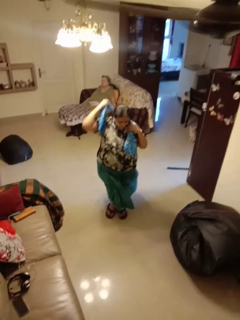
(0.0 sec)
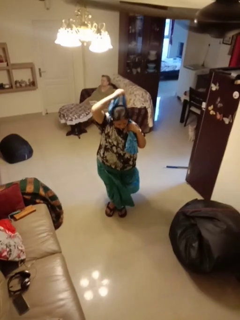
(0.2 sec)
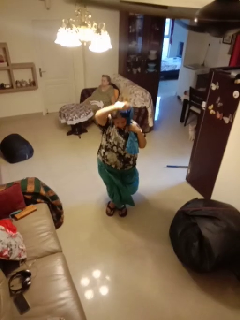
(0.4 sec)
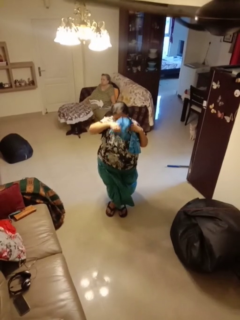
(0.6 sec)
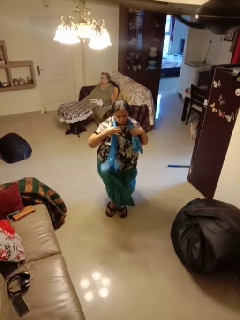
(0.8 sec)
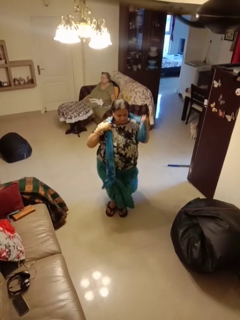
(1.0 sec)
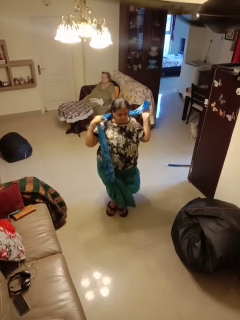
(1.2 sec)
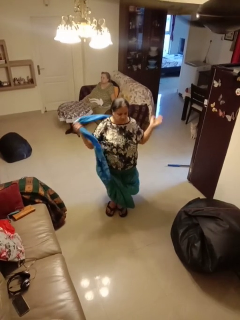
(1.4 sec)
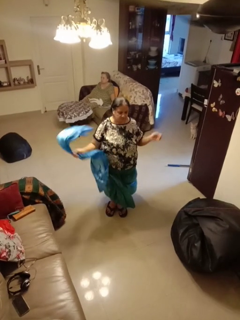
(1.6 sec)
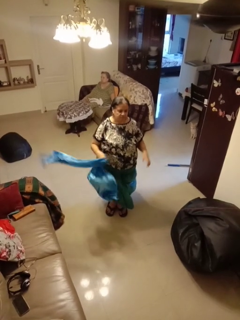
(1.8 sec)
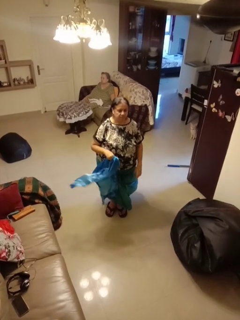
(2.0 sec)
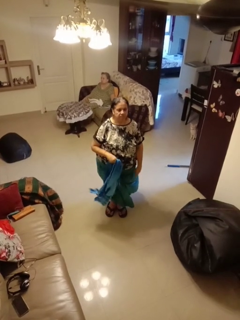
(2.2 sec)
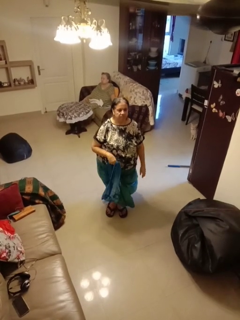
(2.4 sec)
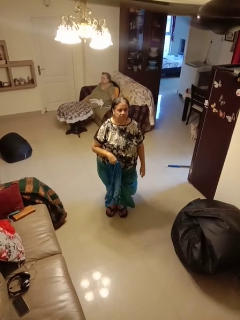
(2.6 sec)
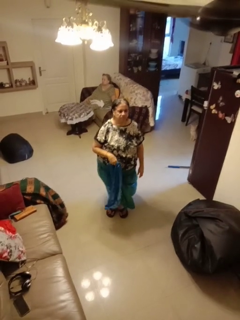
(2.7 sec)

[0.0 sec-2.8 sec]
person takes off scarf

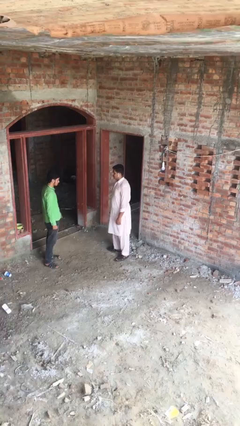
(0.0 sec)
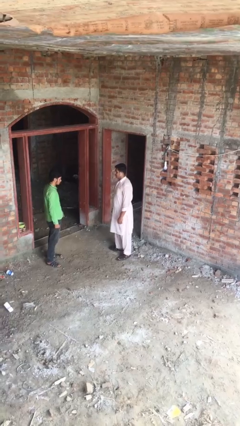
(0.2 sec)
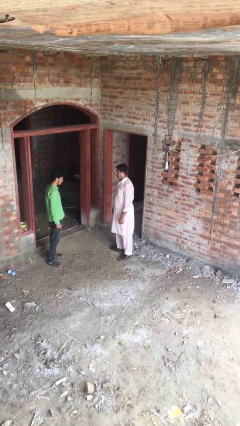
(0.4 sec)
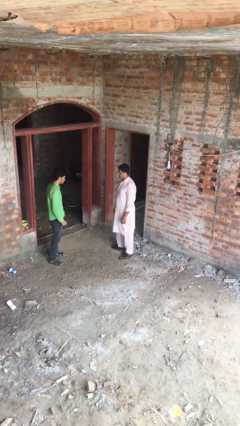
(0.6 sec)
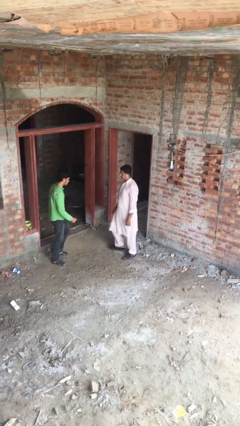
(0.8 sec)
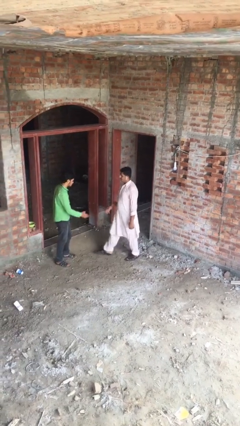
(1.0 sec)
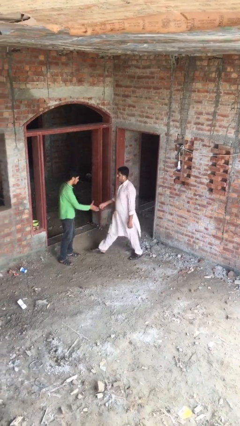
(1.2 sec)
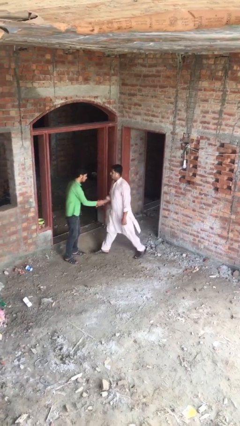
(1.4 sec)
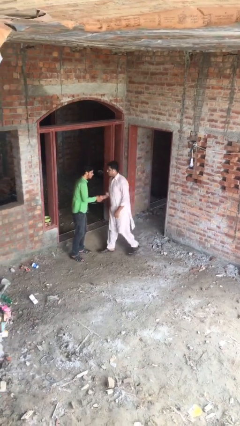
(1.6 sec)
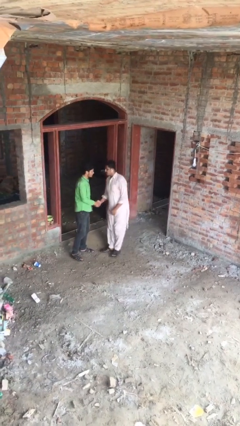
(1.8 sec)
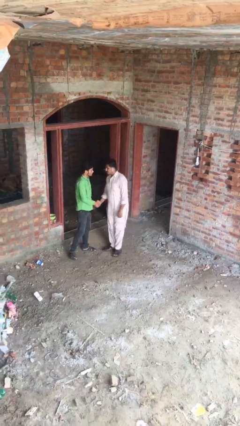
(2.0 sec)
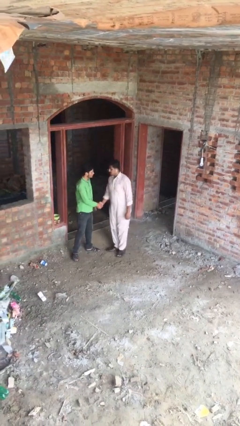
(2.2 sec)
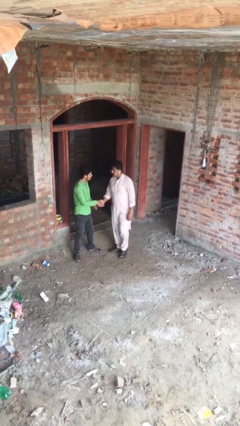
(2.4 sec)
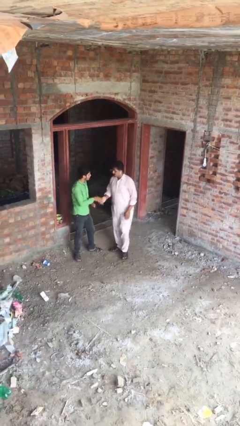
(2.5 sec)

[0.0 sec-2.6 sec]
person shakes hand

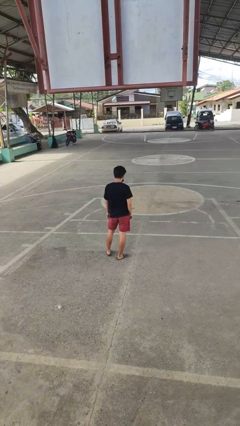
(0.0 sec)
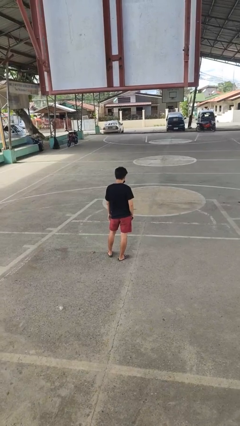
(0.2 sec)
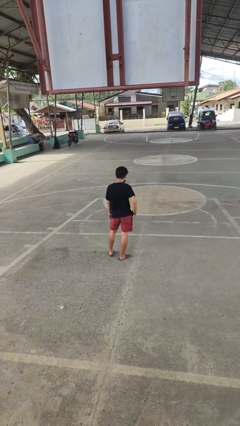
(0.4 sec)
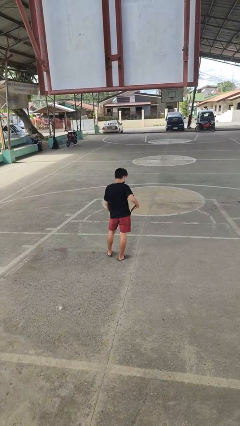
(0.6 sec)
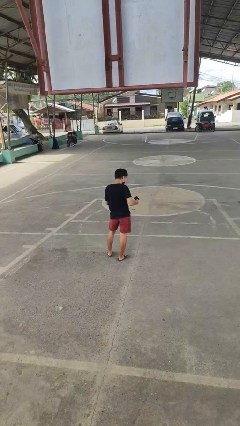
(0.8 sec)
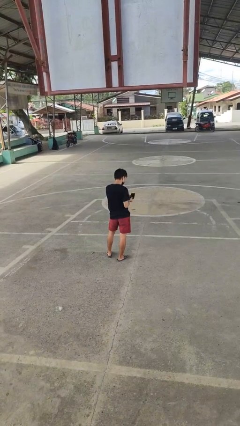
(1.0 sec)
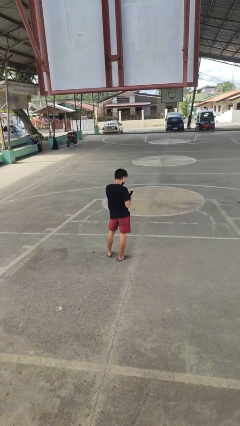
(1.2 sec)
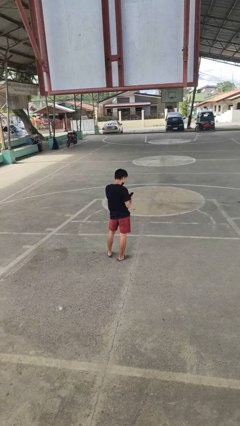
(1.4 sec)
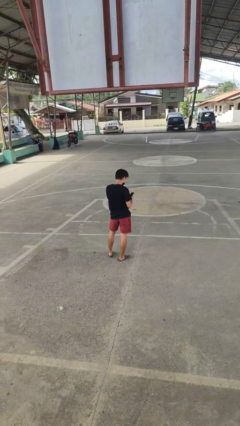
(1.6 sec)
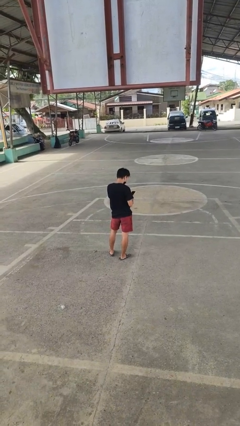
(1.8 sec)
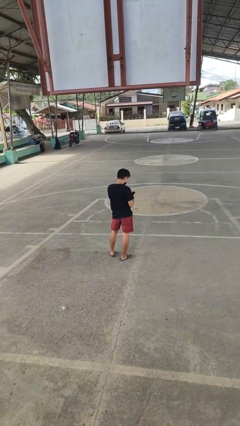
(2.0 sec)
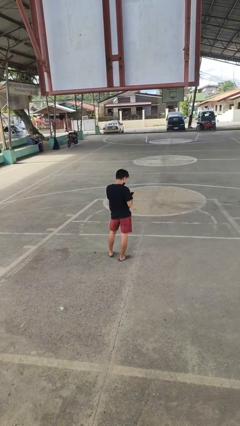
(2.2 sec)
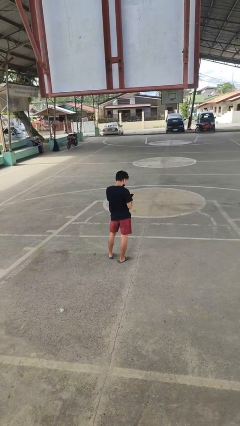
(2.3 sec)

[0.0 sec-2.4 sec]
person takes phone from pocket

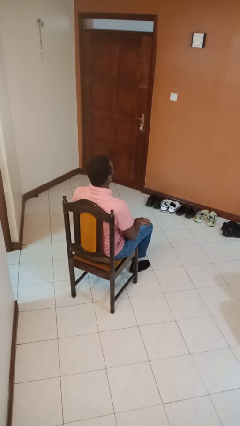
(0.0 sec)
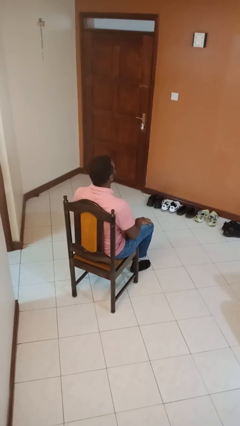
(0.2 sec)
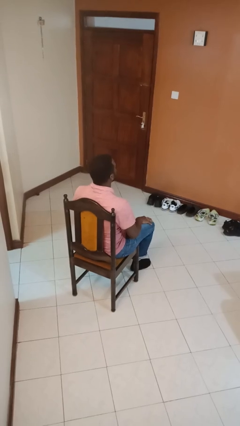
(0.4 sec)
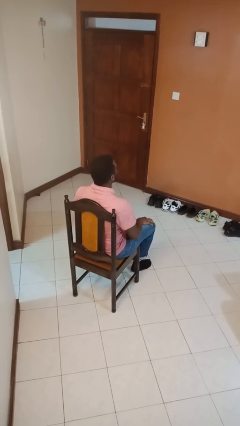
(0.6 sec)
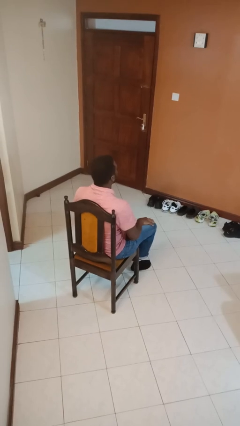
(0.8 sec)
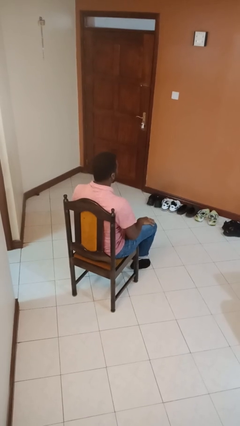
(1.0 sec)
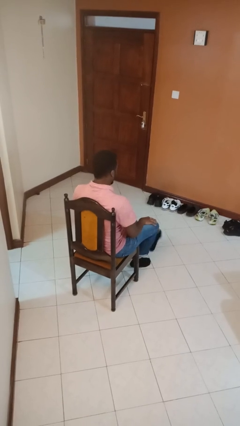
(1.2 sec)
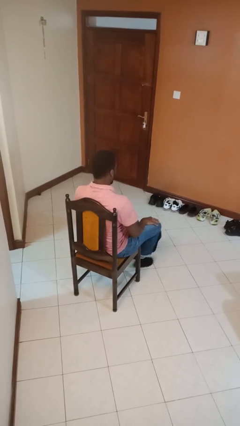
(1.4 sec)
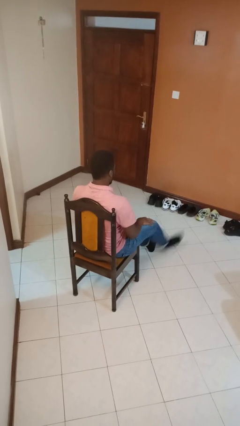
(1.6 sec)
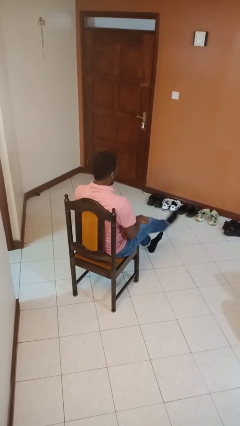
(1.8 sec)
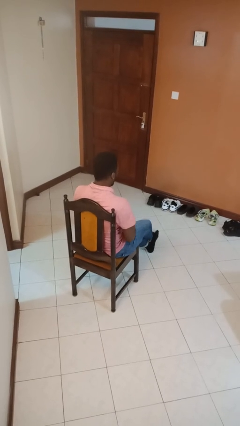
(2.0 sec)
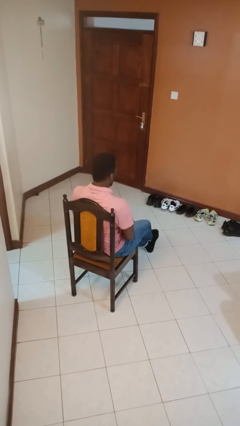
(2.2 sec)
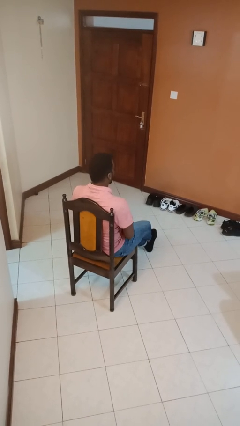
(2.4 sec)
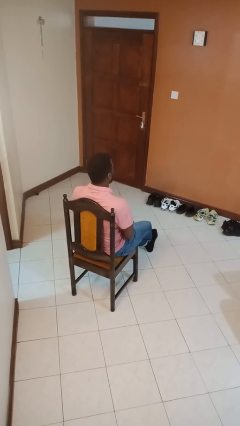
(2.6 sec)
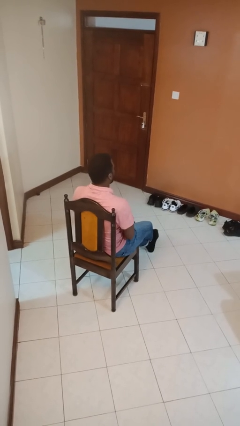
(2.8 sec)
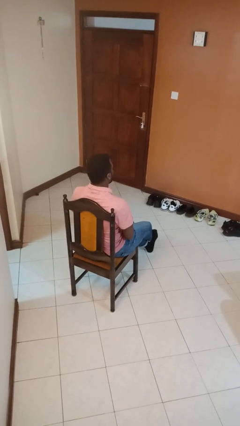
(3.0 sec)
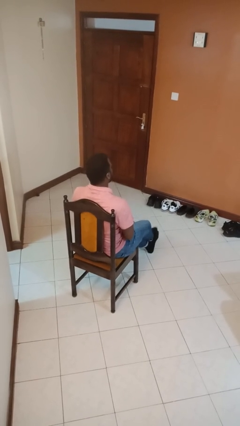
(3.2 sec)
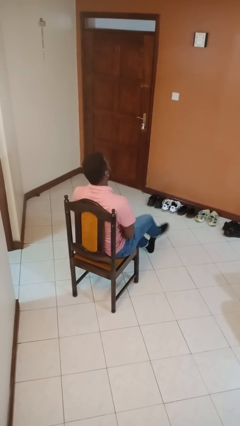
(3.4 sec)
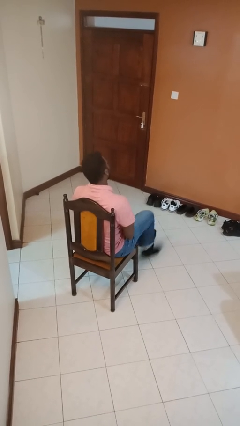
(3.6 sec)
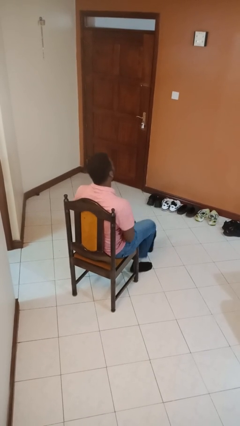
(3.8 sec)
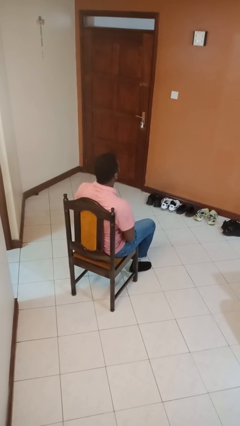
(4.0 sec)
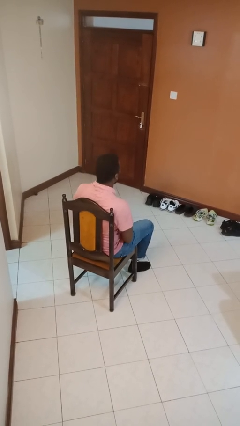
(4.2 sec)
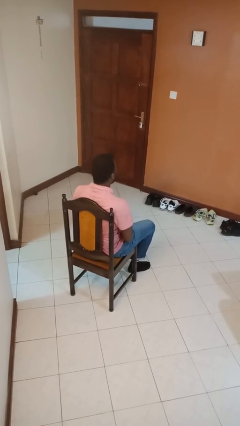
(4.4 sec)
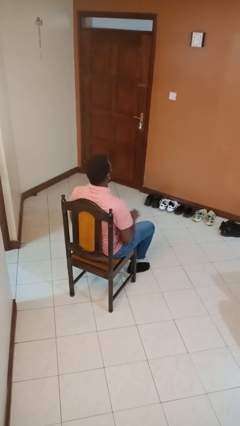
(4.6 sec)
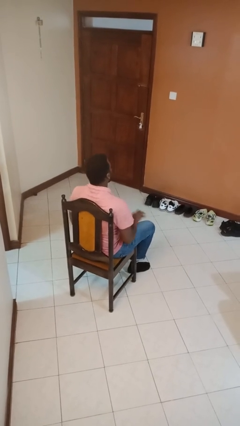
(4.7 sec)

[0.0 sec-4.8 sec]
person crosses legs

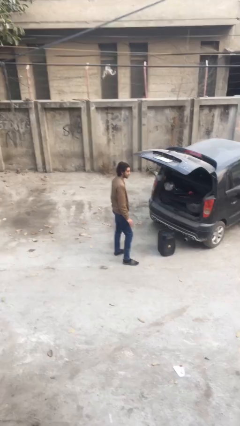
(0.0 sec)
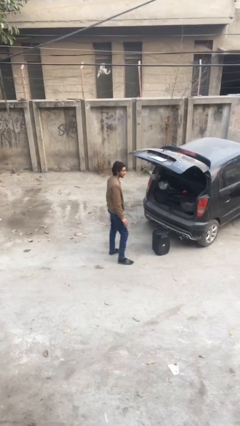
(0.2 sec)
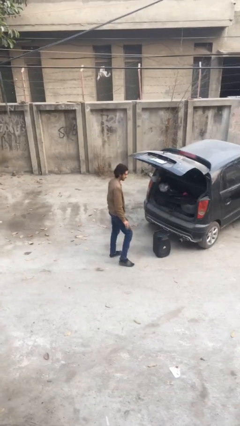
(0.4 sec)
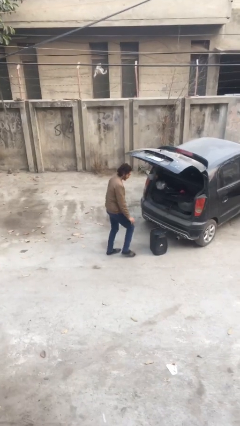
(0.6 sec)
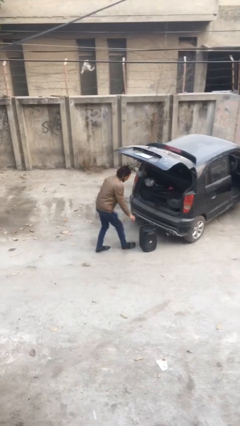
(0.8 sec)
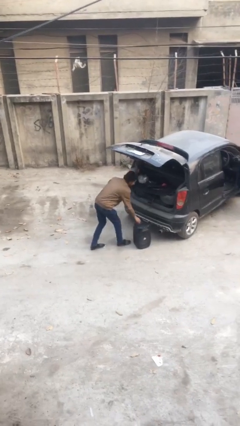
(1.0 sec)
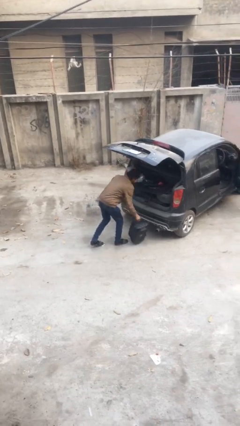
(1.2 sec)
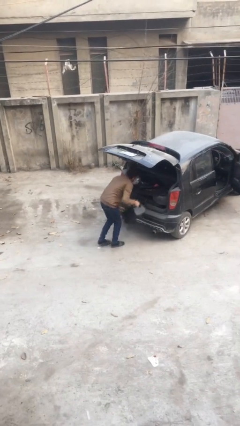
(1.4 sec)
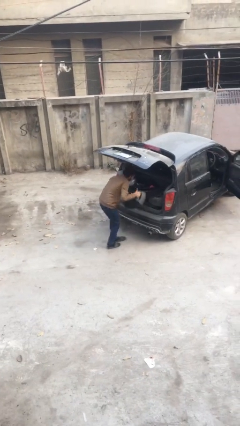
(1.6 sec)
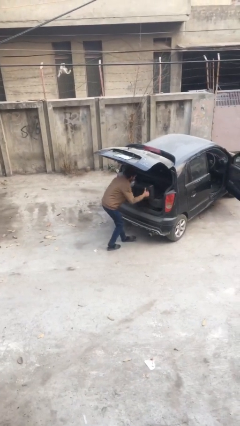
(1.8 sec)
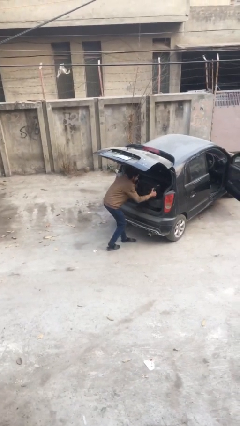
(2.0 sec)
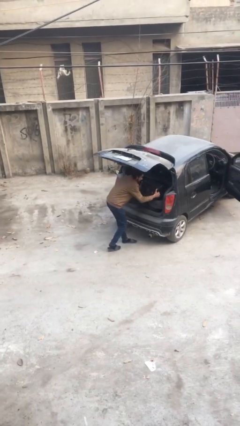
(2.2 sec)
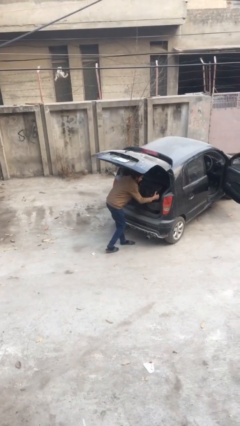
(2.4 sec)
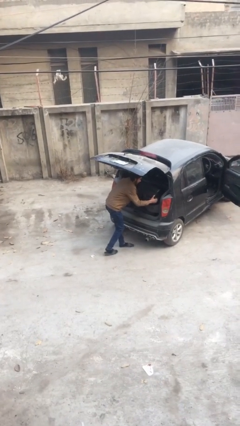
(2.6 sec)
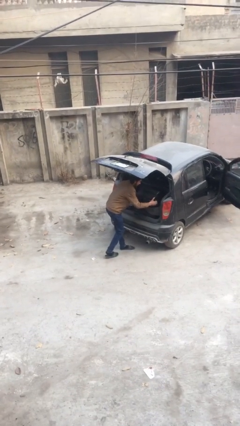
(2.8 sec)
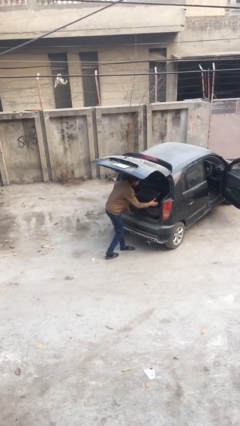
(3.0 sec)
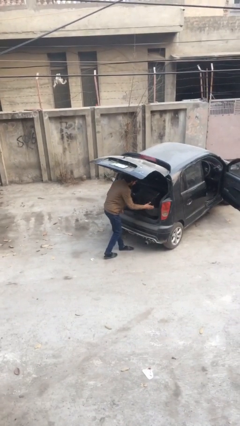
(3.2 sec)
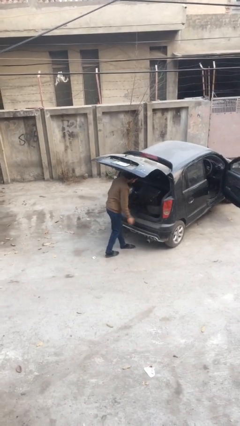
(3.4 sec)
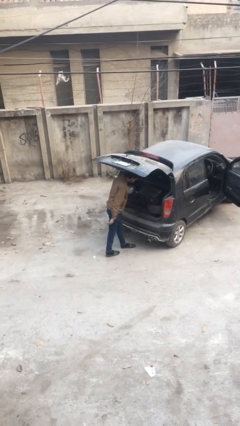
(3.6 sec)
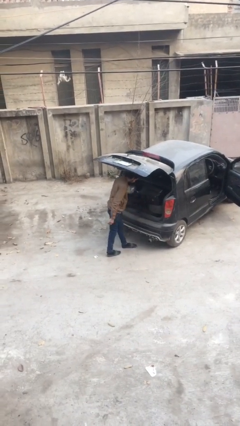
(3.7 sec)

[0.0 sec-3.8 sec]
person loads car

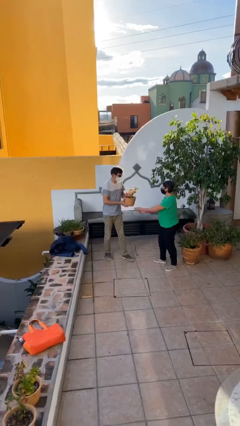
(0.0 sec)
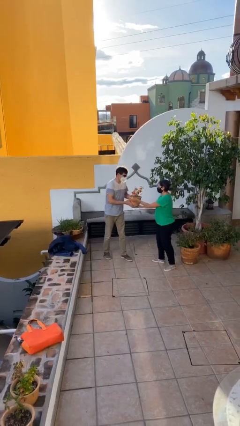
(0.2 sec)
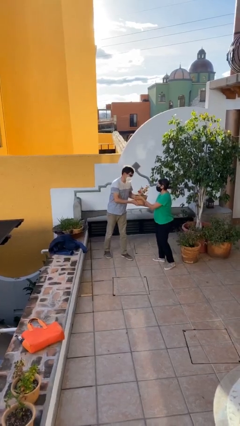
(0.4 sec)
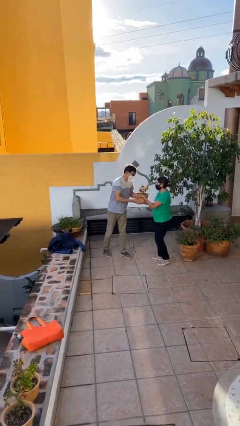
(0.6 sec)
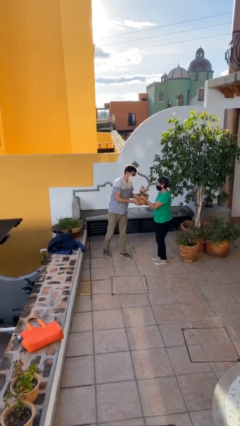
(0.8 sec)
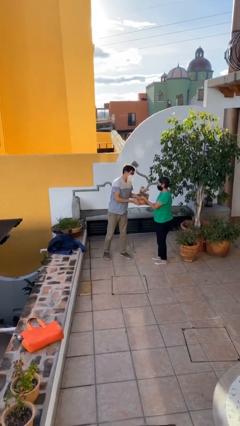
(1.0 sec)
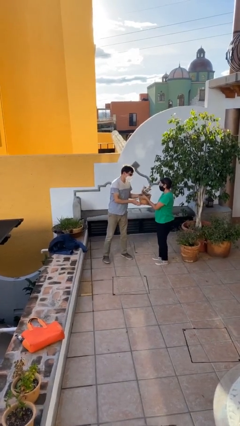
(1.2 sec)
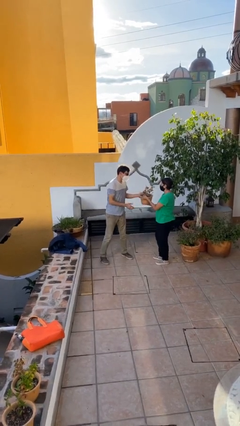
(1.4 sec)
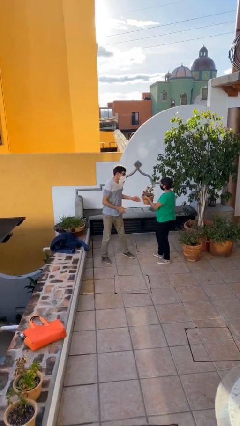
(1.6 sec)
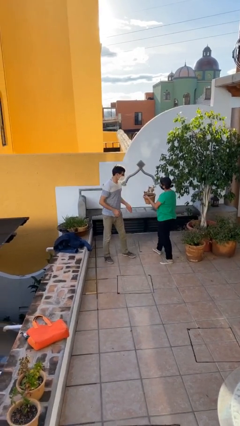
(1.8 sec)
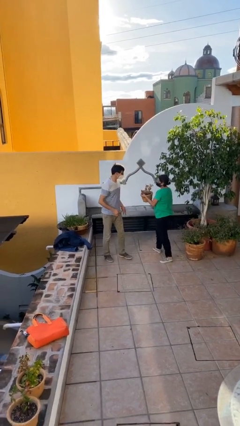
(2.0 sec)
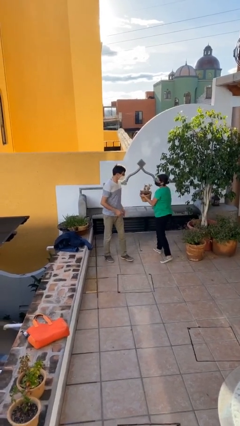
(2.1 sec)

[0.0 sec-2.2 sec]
person transfers object to person
